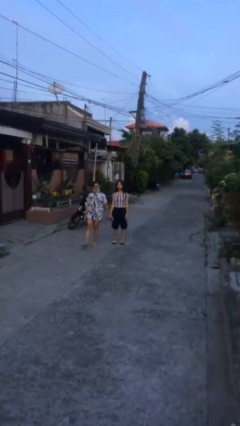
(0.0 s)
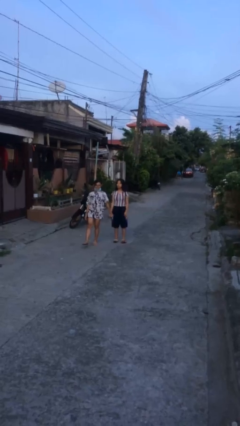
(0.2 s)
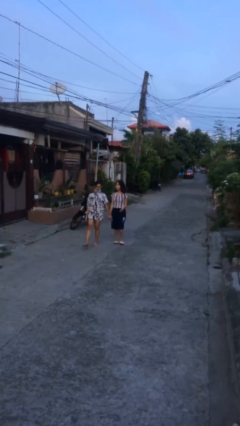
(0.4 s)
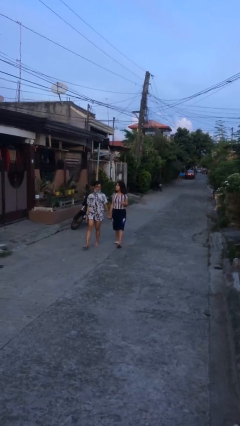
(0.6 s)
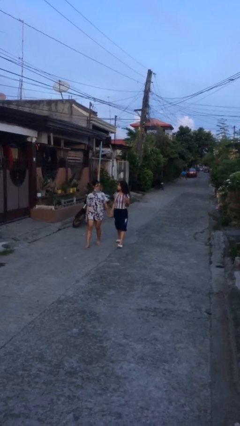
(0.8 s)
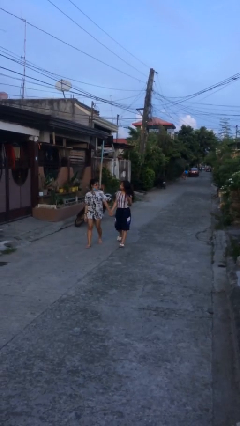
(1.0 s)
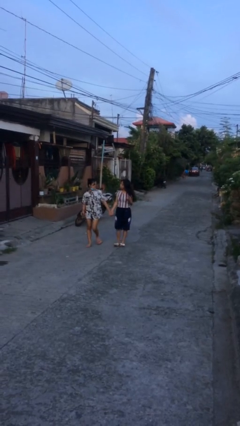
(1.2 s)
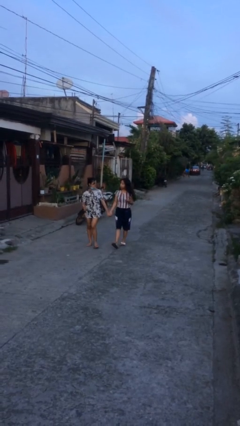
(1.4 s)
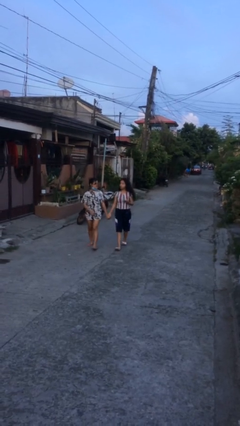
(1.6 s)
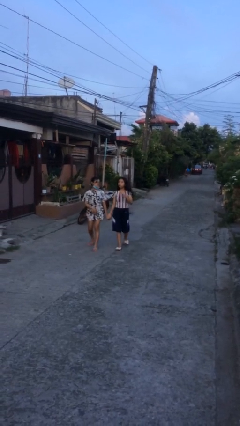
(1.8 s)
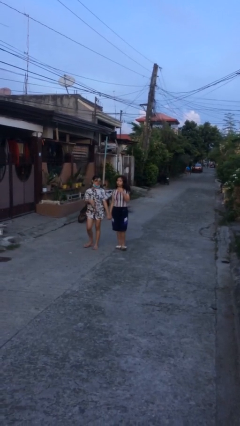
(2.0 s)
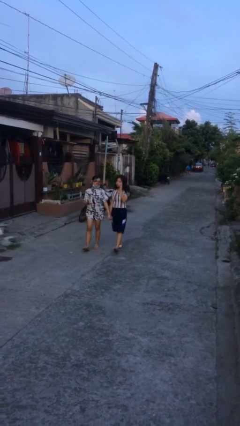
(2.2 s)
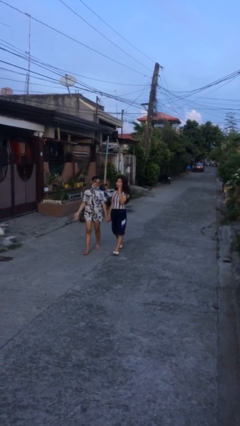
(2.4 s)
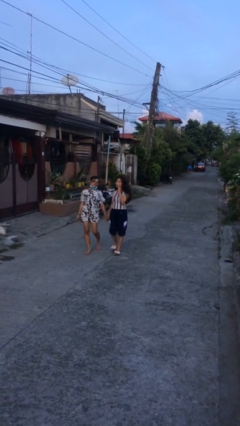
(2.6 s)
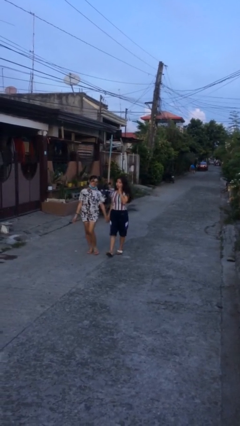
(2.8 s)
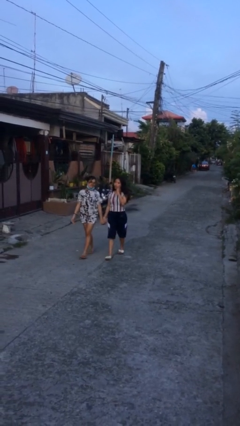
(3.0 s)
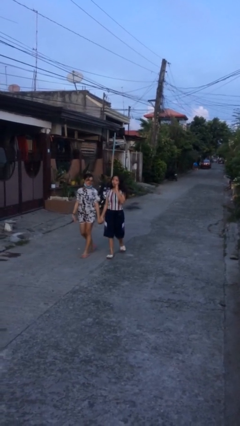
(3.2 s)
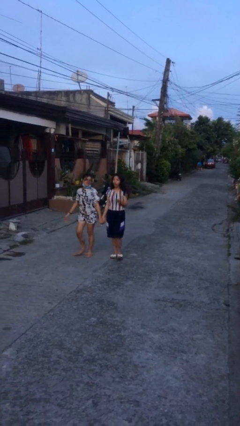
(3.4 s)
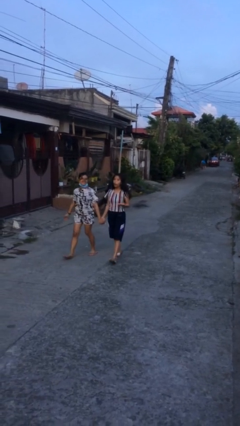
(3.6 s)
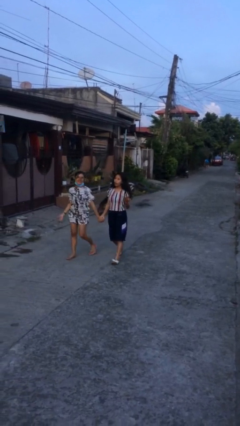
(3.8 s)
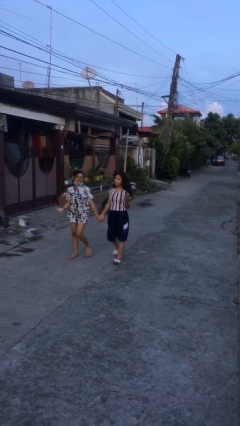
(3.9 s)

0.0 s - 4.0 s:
person holds hand

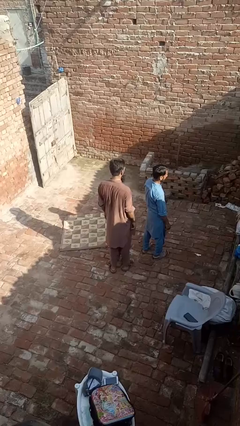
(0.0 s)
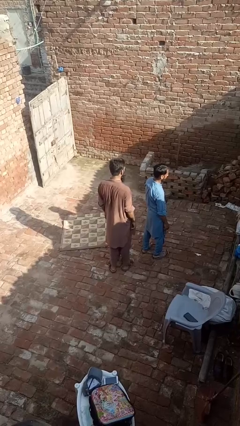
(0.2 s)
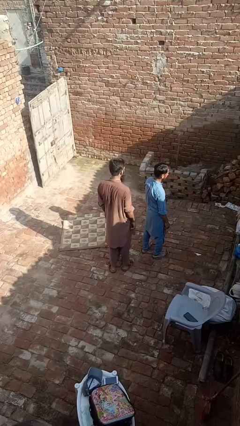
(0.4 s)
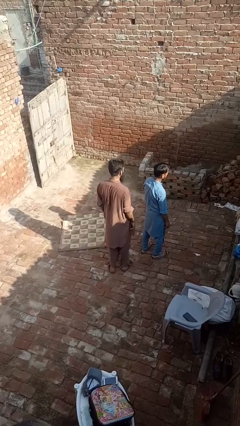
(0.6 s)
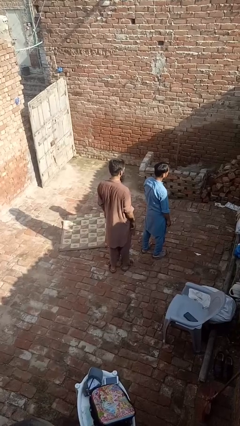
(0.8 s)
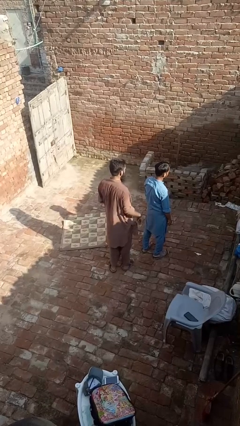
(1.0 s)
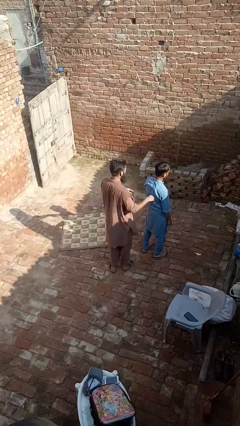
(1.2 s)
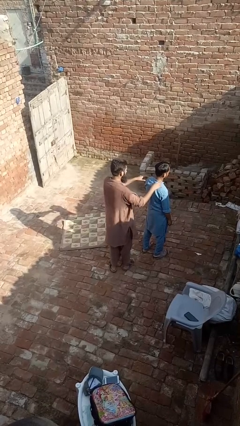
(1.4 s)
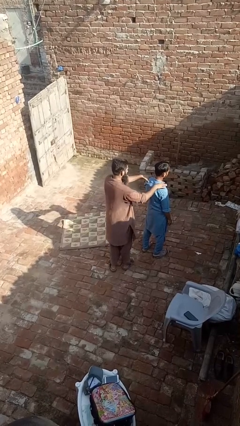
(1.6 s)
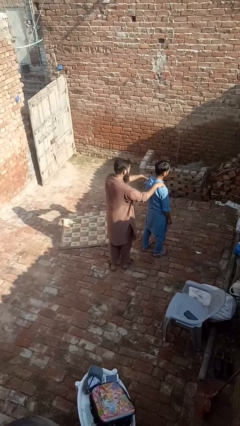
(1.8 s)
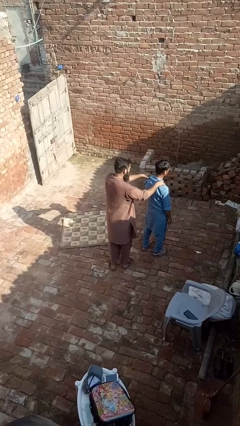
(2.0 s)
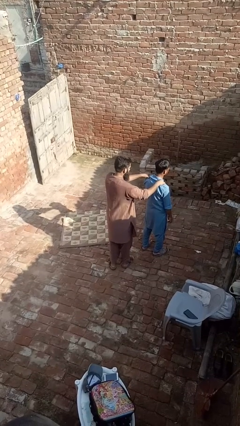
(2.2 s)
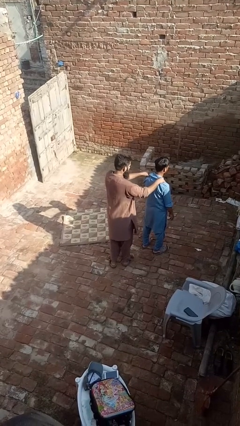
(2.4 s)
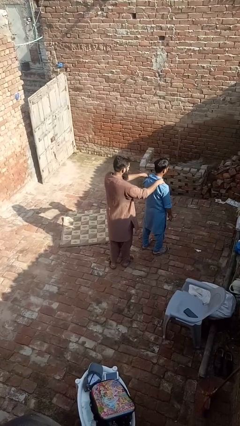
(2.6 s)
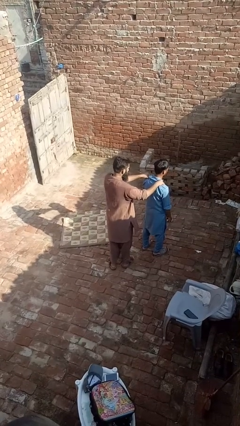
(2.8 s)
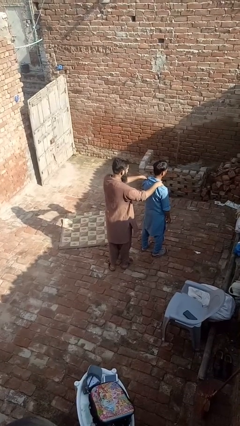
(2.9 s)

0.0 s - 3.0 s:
person grabs person by shoulder

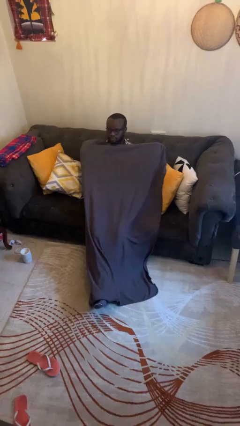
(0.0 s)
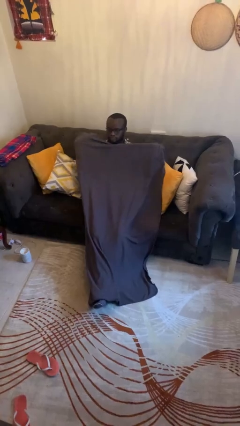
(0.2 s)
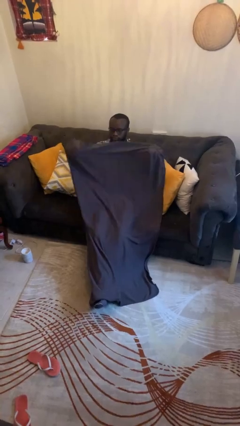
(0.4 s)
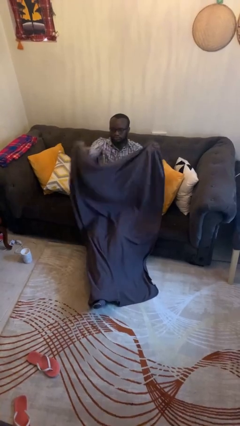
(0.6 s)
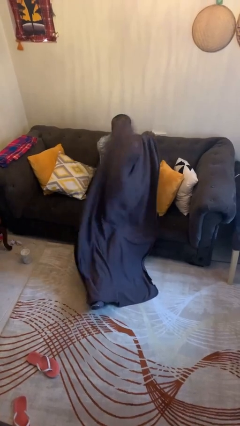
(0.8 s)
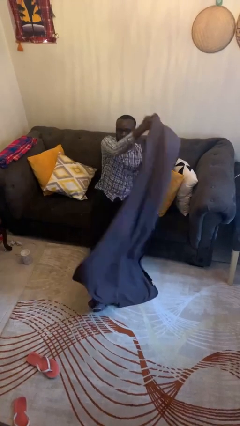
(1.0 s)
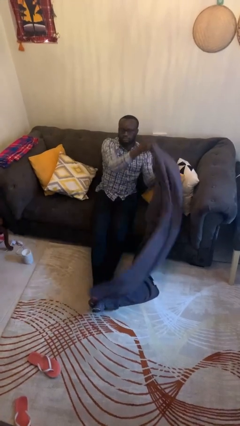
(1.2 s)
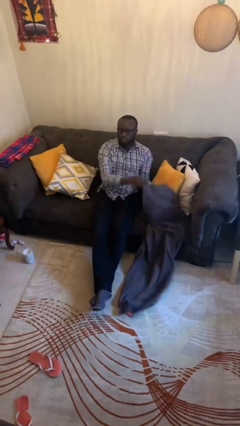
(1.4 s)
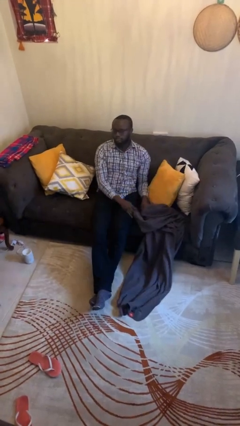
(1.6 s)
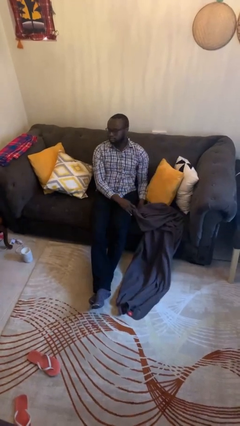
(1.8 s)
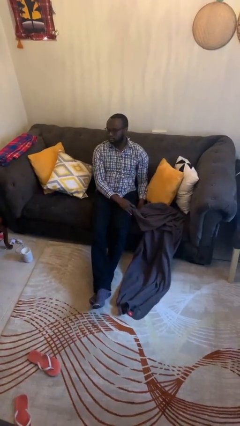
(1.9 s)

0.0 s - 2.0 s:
person uncovers with blanket

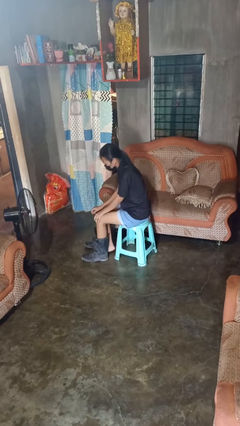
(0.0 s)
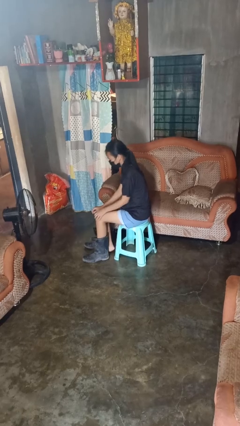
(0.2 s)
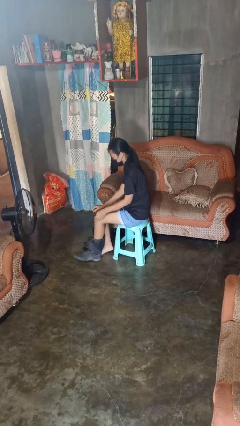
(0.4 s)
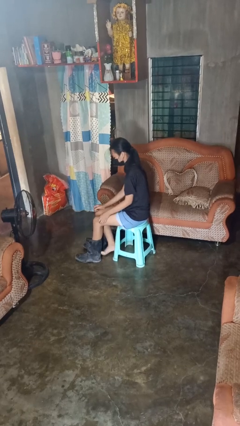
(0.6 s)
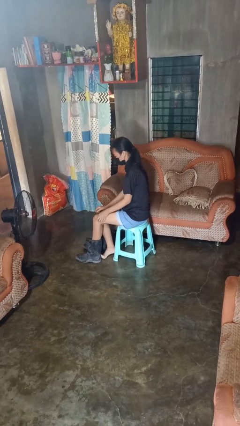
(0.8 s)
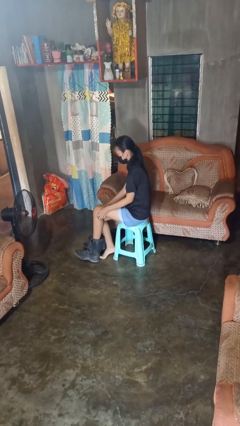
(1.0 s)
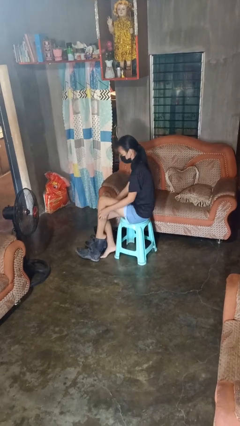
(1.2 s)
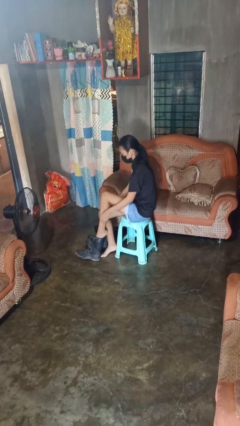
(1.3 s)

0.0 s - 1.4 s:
person takes off boots

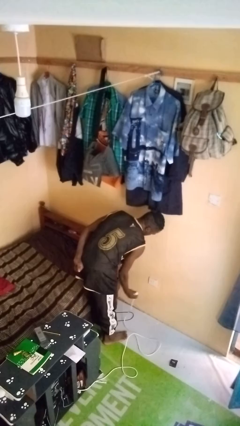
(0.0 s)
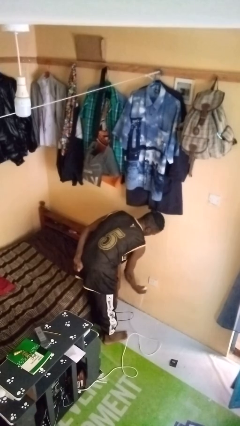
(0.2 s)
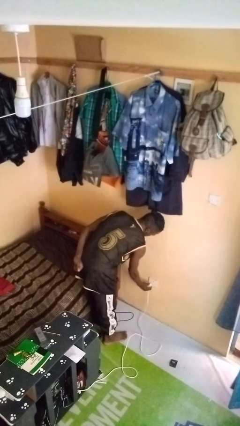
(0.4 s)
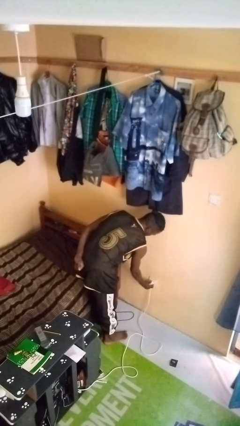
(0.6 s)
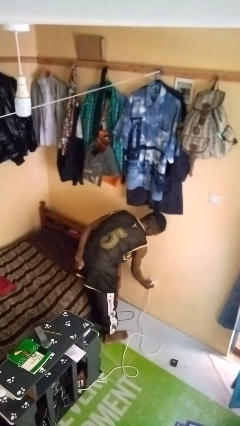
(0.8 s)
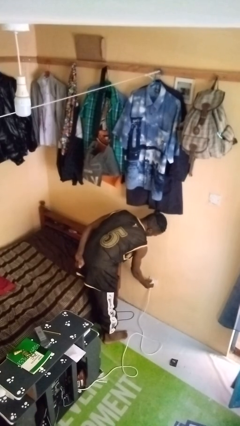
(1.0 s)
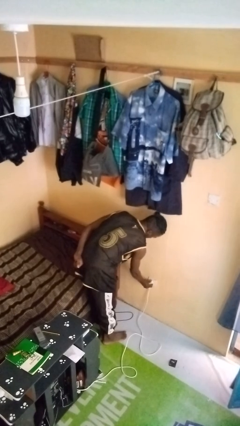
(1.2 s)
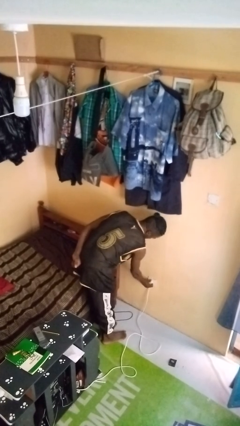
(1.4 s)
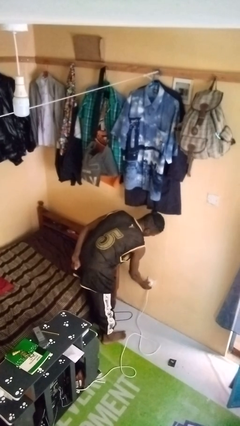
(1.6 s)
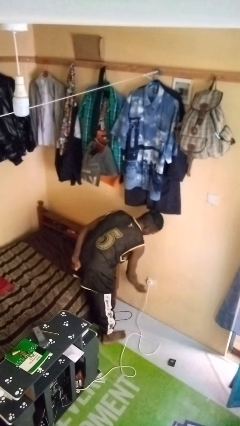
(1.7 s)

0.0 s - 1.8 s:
person plugs into electrical socket

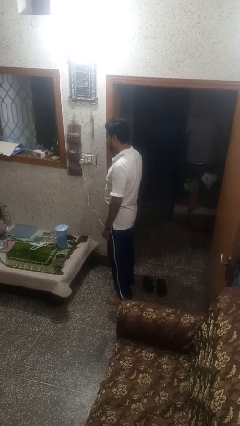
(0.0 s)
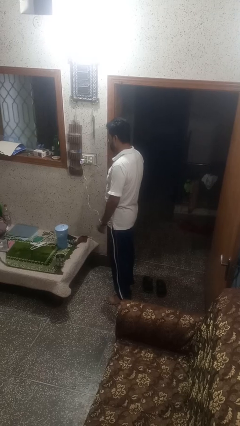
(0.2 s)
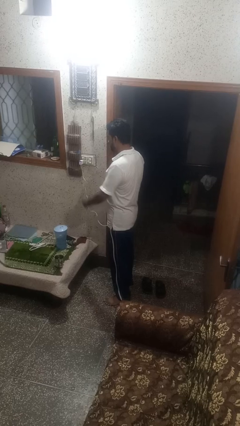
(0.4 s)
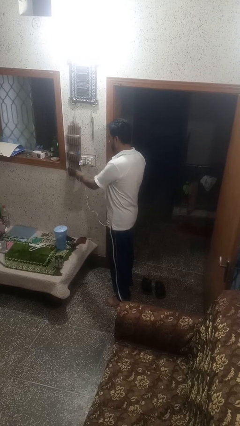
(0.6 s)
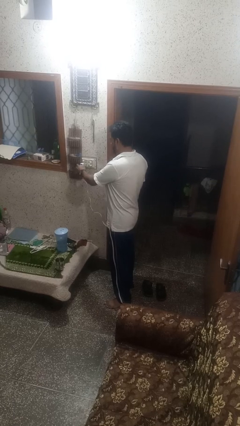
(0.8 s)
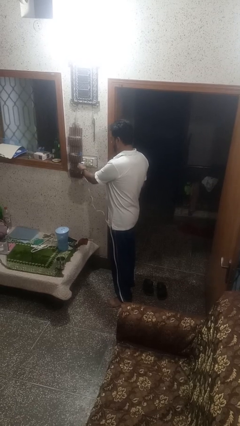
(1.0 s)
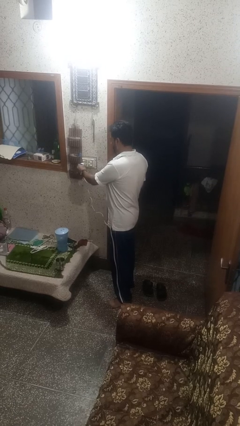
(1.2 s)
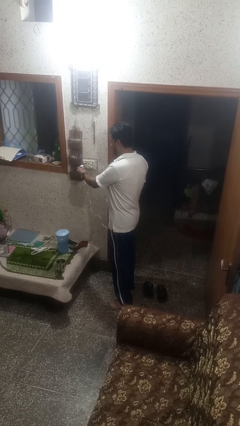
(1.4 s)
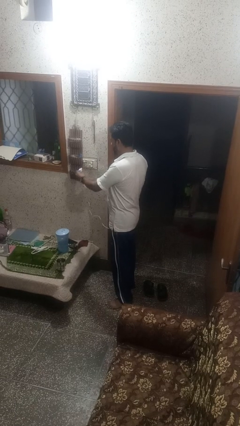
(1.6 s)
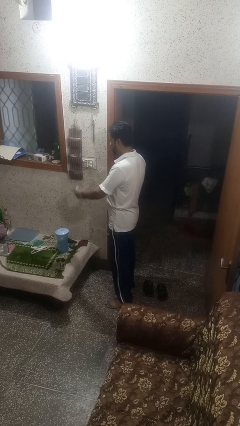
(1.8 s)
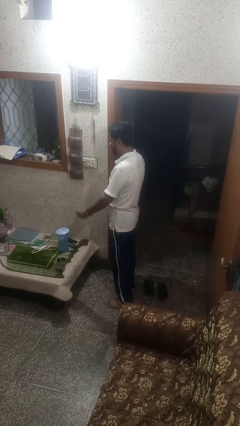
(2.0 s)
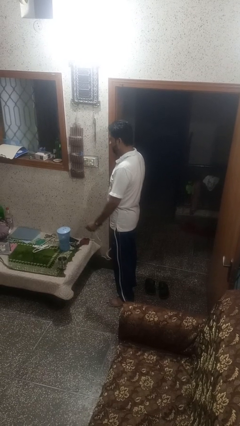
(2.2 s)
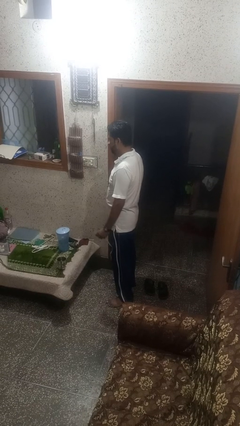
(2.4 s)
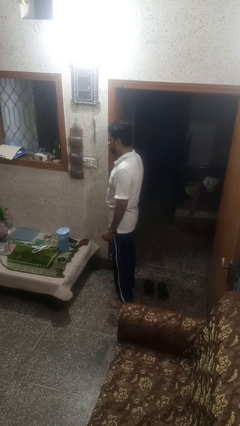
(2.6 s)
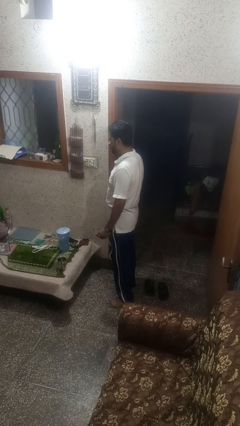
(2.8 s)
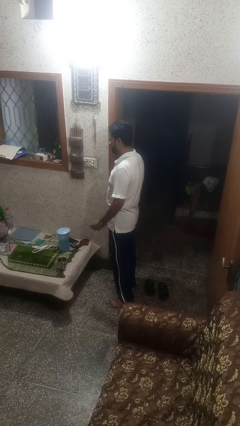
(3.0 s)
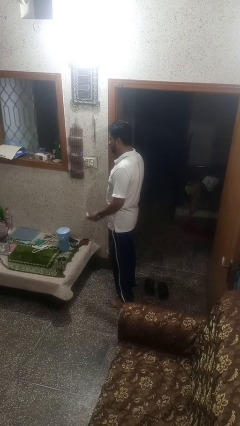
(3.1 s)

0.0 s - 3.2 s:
person unplugs from electrical socket

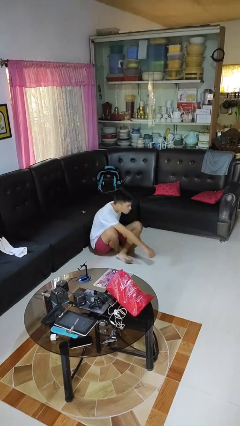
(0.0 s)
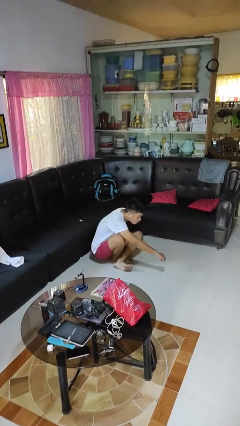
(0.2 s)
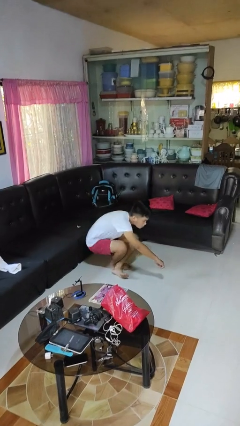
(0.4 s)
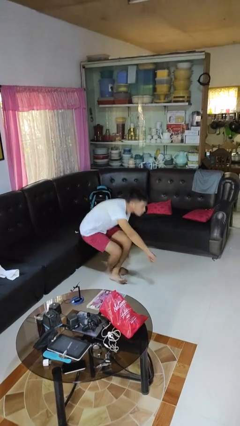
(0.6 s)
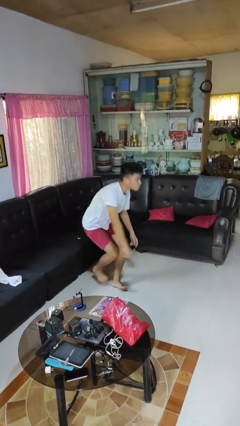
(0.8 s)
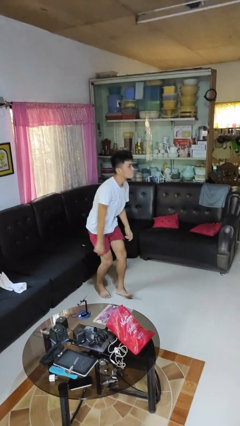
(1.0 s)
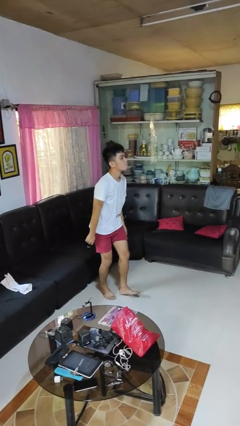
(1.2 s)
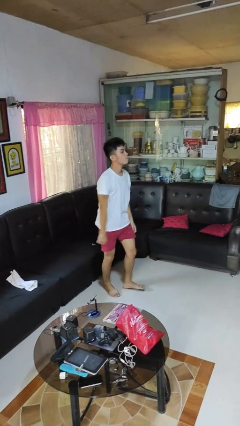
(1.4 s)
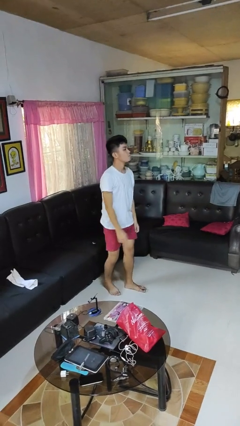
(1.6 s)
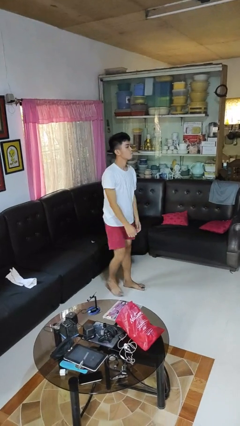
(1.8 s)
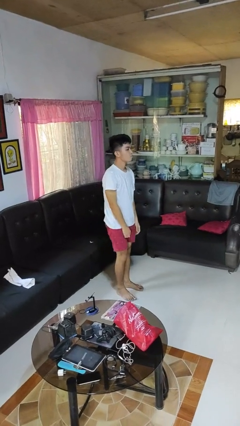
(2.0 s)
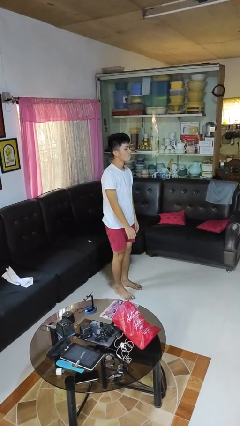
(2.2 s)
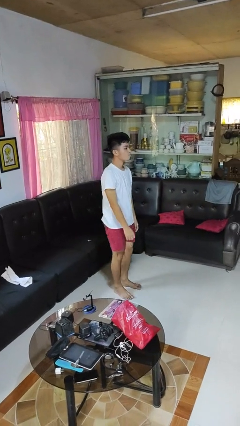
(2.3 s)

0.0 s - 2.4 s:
person stands up from floor
